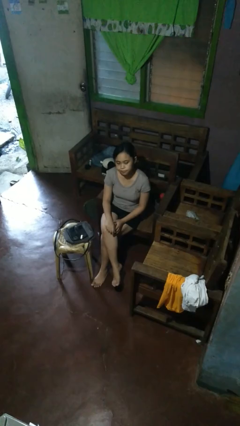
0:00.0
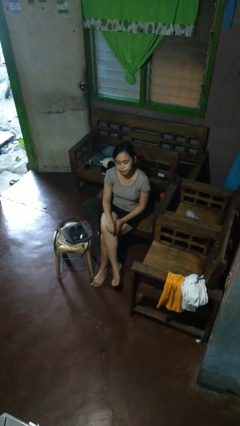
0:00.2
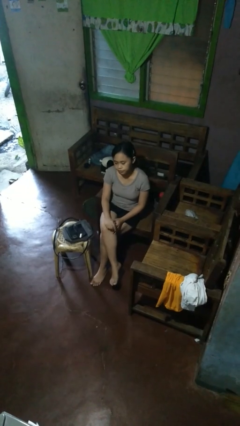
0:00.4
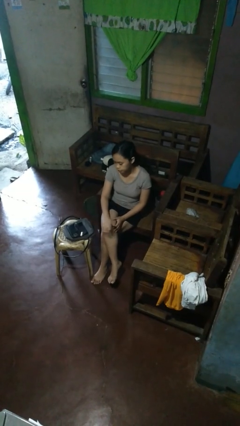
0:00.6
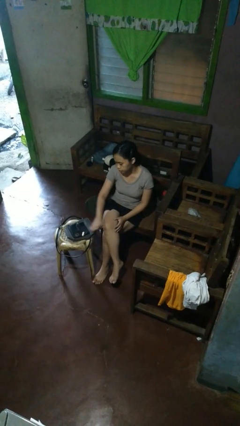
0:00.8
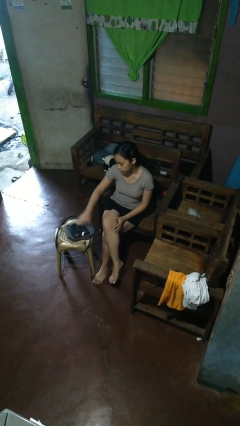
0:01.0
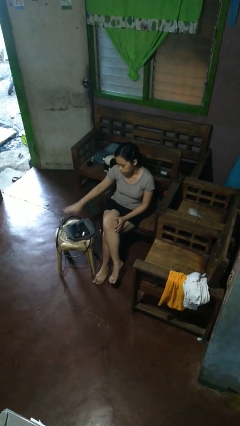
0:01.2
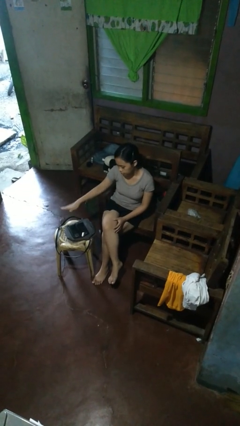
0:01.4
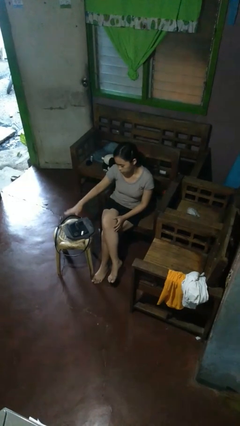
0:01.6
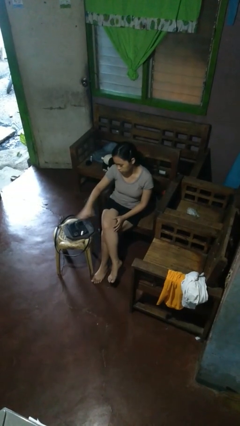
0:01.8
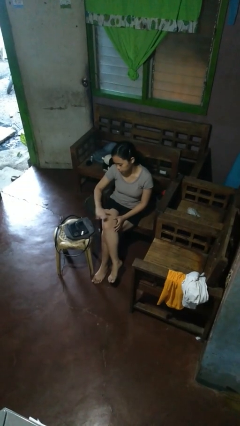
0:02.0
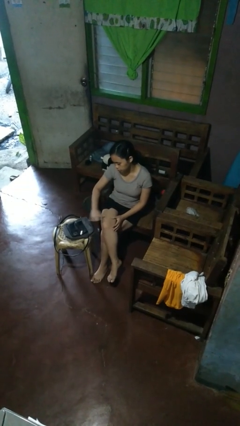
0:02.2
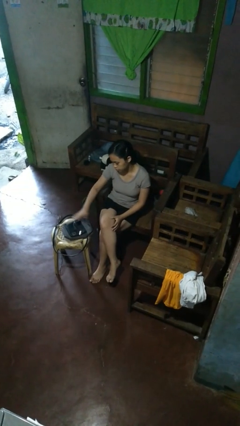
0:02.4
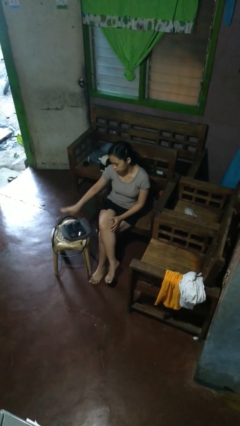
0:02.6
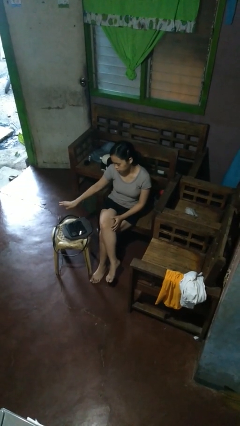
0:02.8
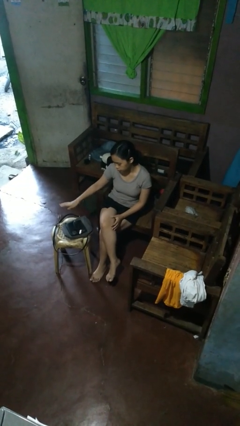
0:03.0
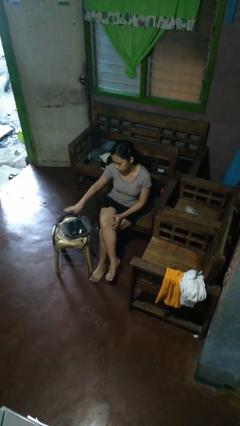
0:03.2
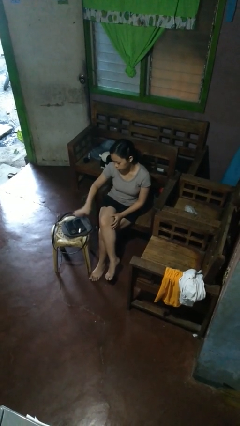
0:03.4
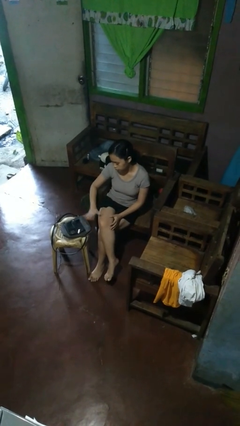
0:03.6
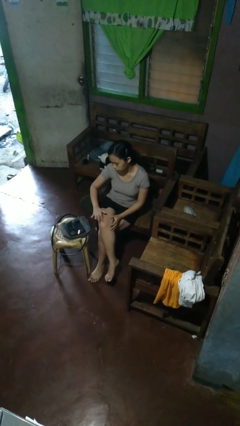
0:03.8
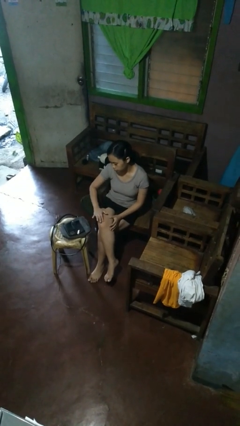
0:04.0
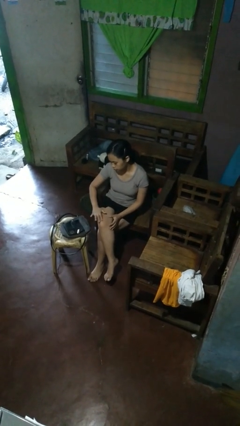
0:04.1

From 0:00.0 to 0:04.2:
person waves hand over object

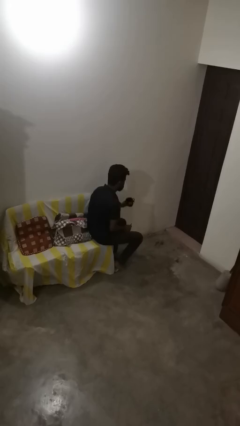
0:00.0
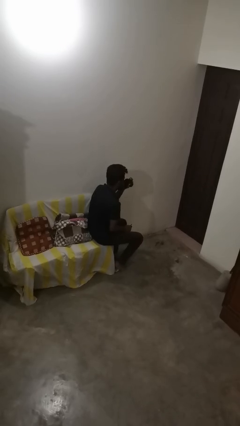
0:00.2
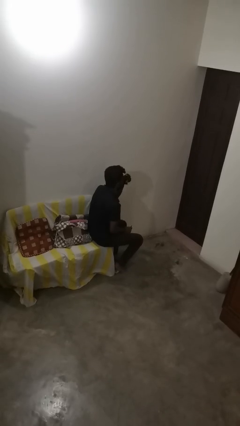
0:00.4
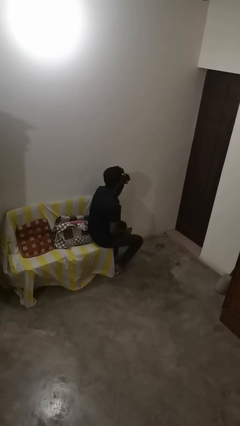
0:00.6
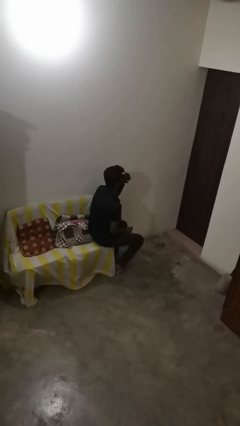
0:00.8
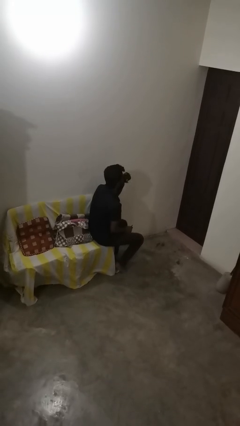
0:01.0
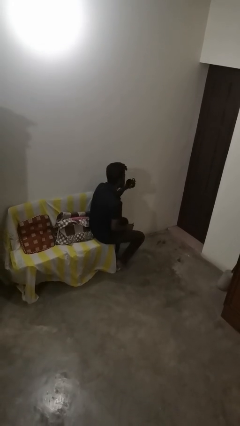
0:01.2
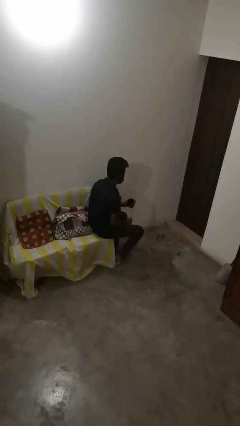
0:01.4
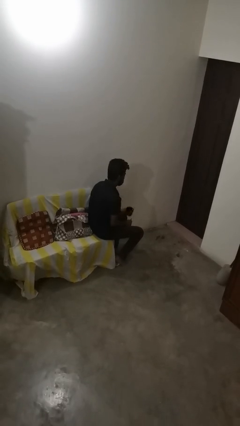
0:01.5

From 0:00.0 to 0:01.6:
person drinks from mug

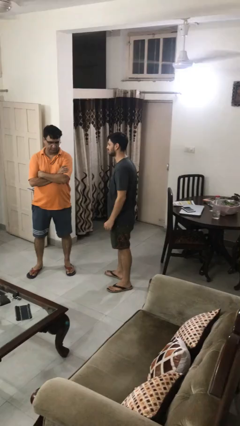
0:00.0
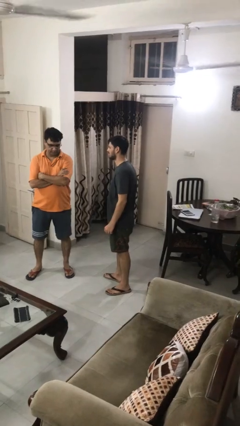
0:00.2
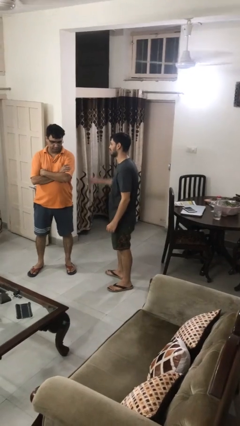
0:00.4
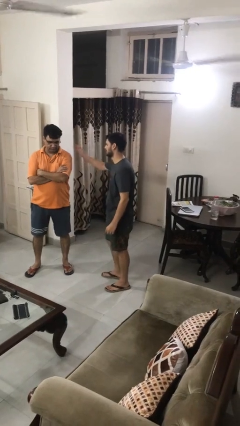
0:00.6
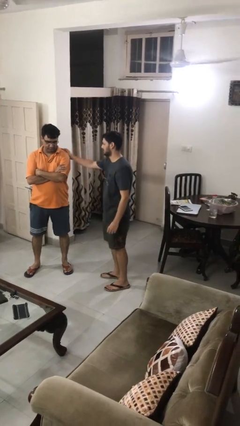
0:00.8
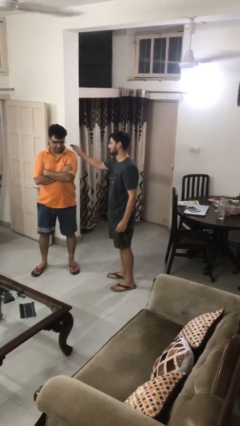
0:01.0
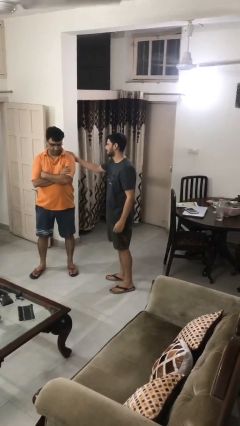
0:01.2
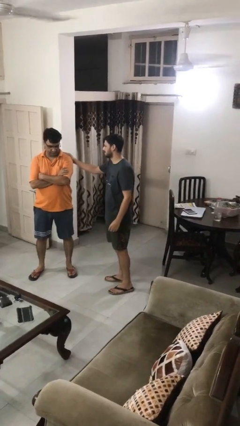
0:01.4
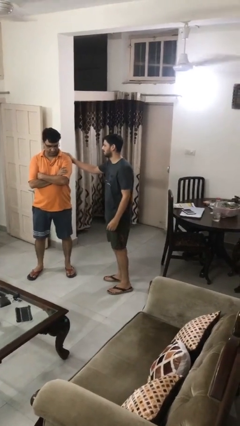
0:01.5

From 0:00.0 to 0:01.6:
person pounds shoulders of person

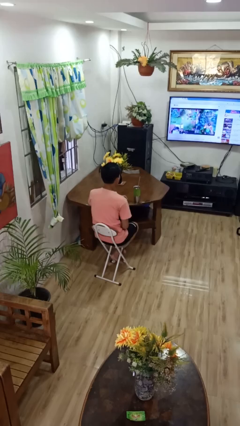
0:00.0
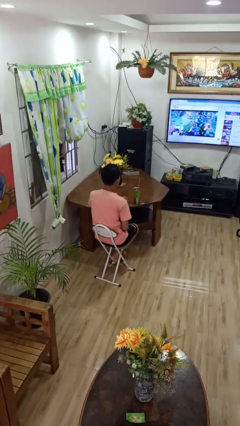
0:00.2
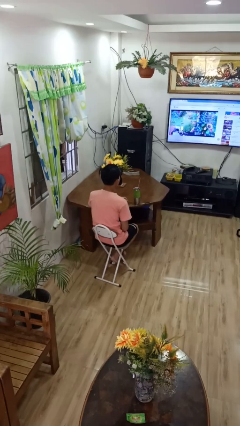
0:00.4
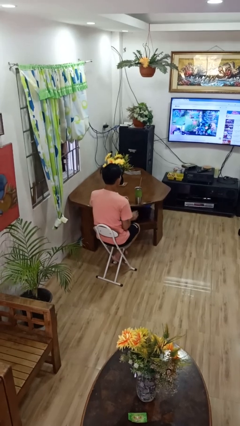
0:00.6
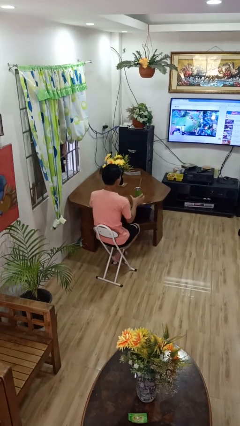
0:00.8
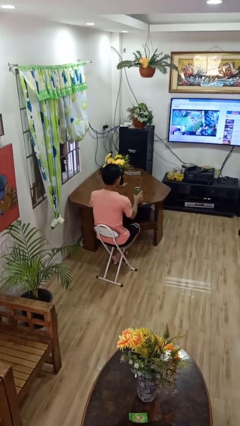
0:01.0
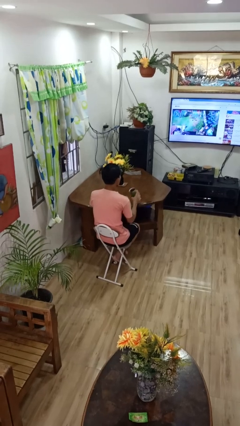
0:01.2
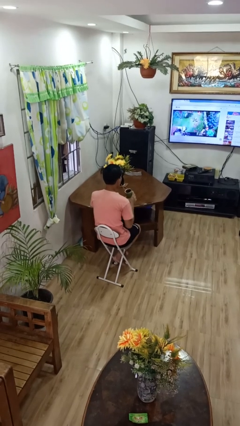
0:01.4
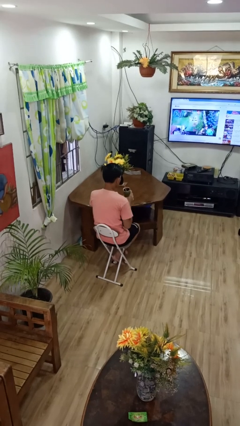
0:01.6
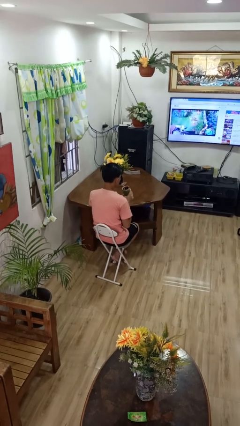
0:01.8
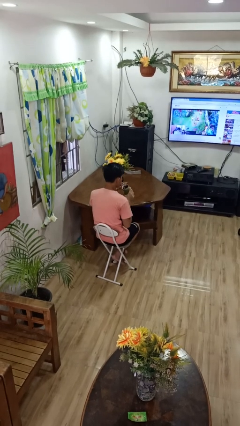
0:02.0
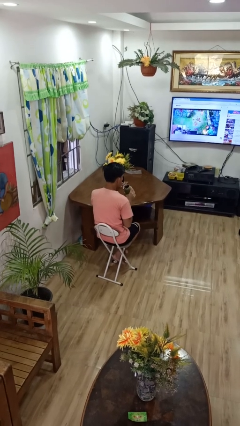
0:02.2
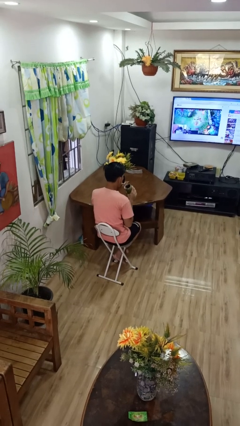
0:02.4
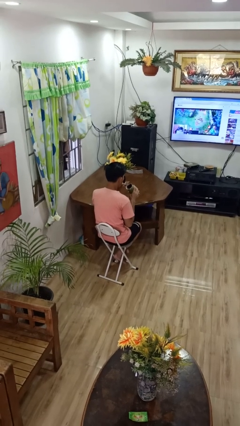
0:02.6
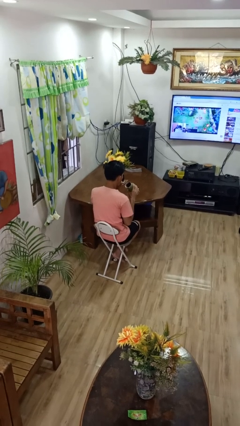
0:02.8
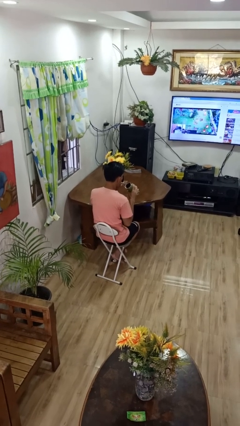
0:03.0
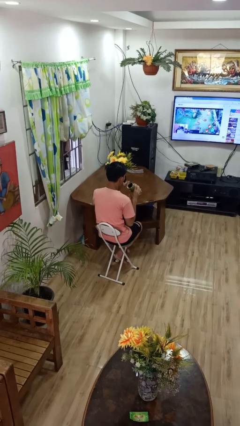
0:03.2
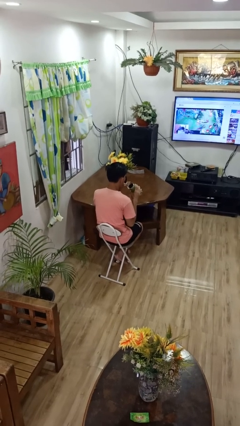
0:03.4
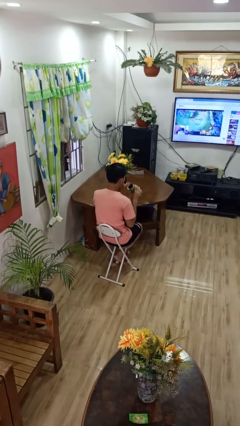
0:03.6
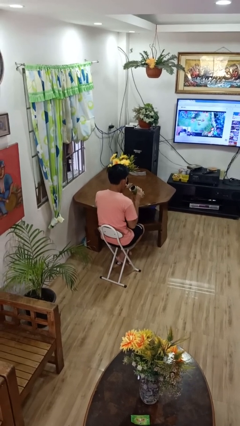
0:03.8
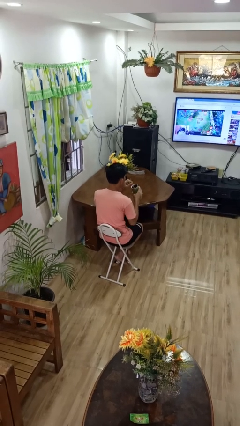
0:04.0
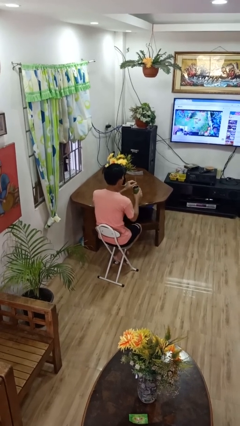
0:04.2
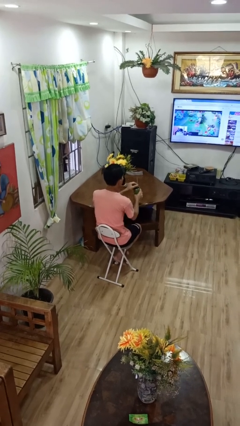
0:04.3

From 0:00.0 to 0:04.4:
person drinks from straw

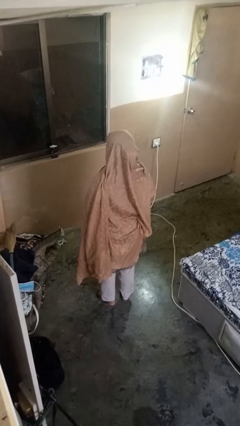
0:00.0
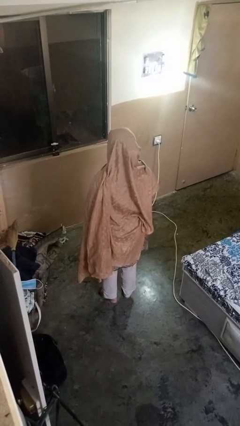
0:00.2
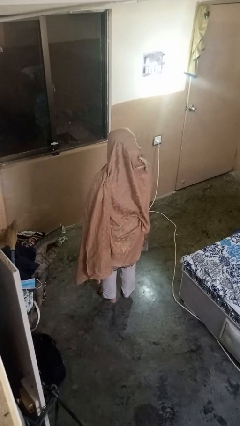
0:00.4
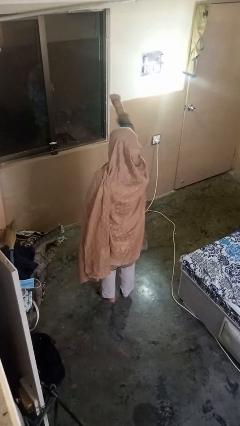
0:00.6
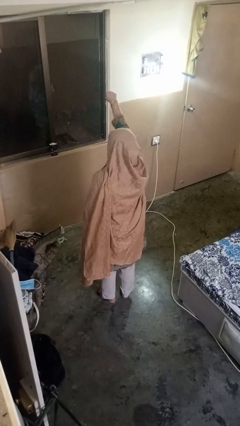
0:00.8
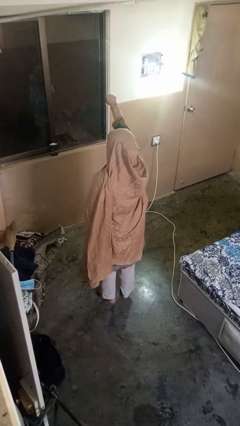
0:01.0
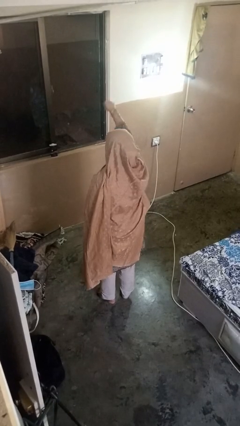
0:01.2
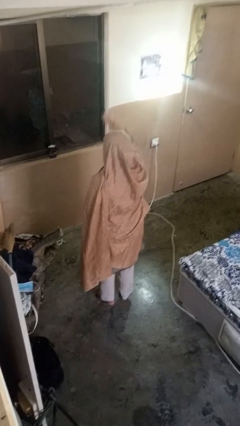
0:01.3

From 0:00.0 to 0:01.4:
person punches

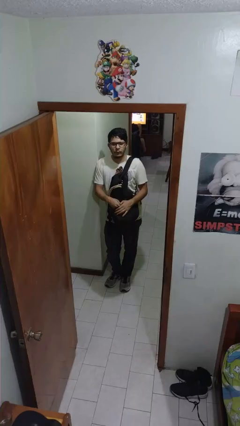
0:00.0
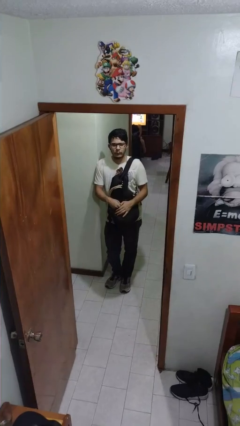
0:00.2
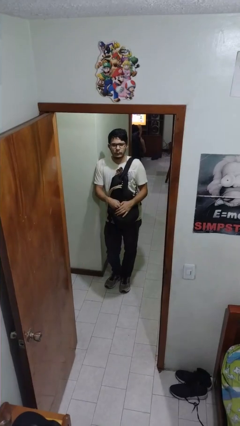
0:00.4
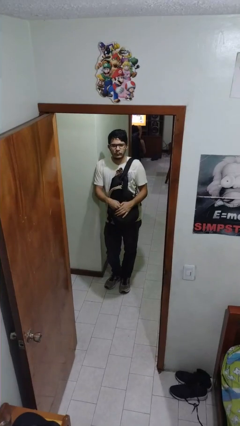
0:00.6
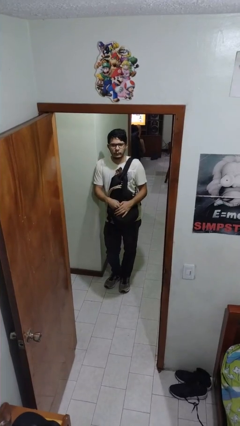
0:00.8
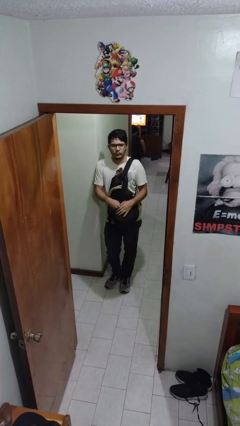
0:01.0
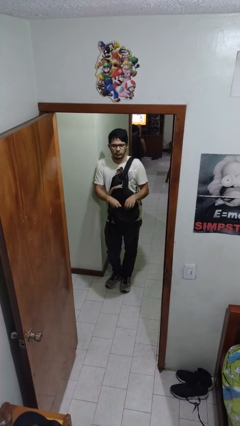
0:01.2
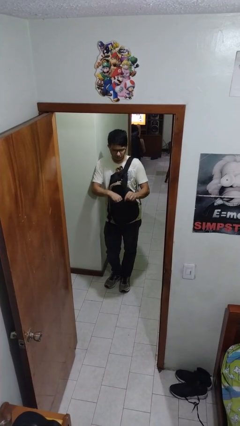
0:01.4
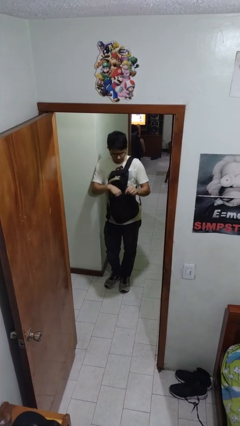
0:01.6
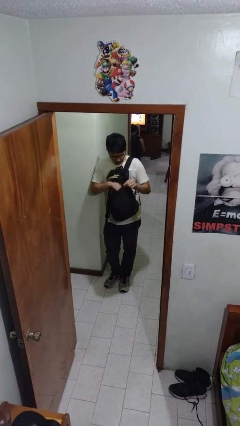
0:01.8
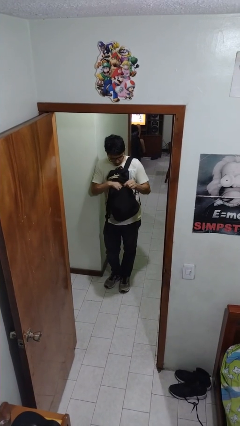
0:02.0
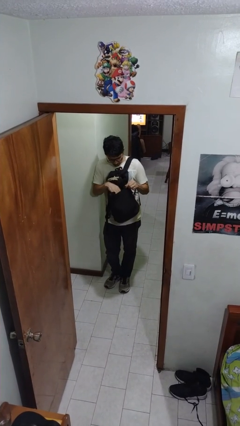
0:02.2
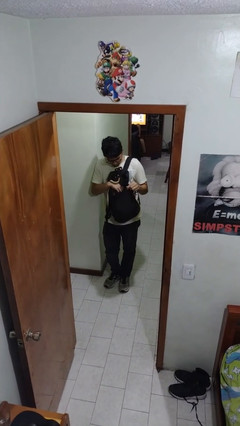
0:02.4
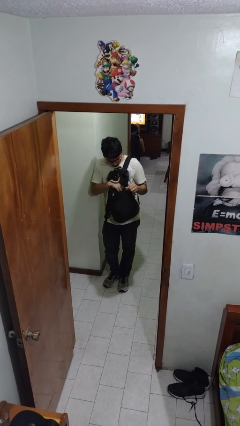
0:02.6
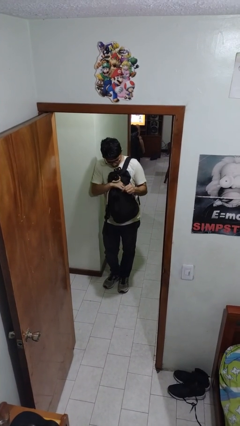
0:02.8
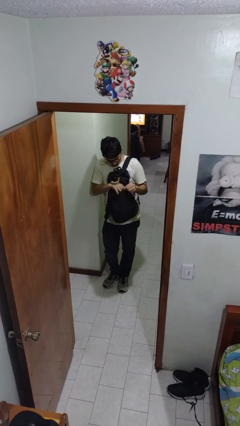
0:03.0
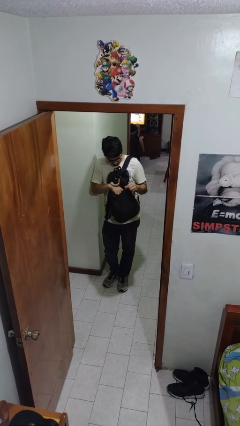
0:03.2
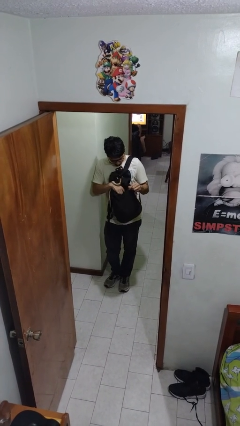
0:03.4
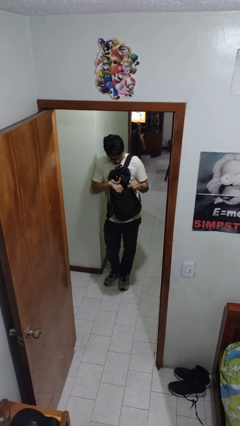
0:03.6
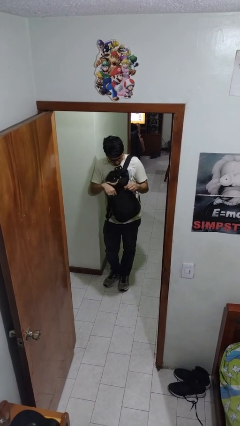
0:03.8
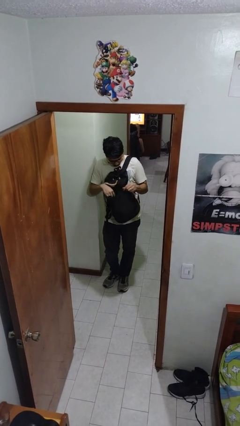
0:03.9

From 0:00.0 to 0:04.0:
person searches in backpack

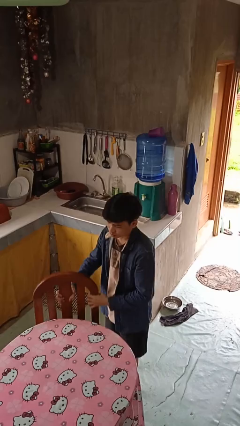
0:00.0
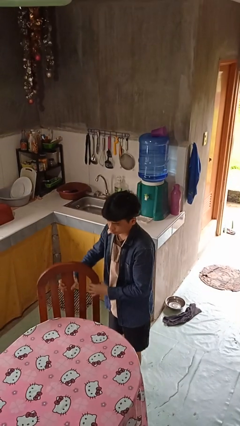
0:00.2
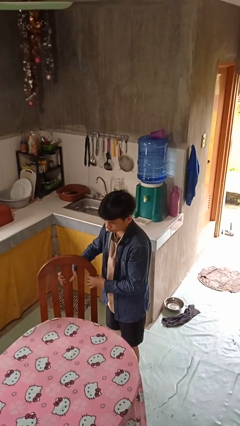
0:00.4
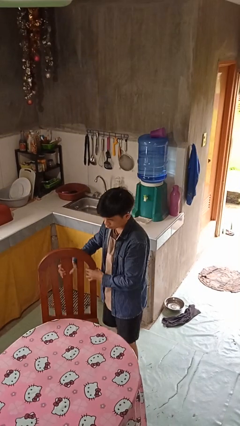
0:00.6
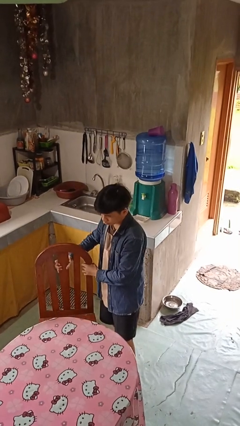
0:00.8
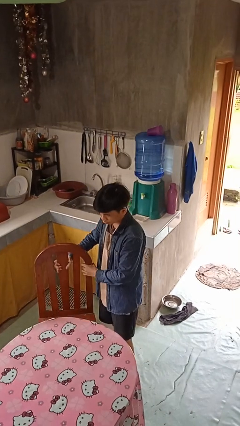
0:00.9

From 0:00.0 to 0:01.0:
person pulls out chair
